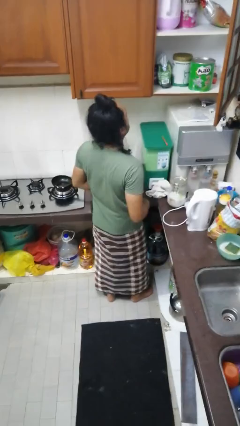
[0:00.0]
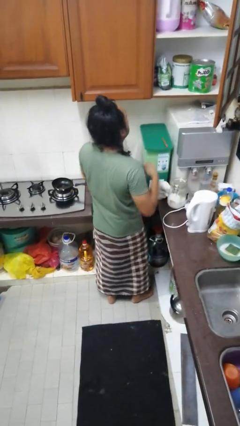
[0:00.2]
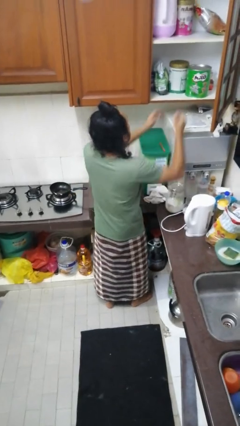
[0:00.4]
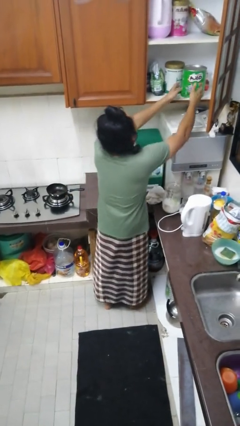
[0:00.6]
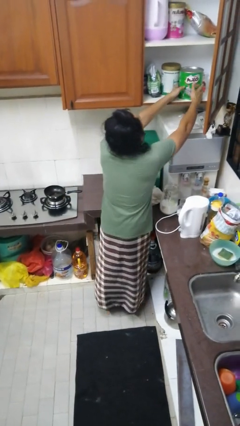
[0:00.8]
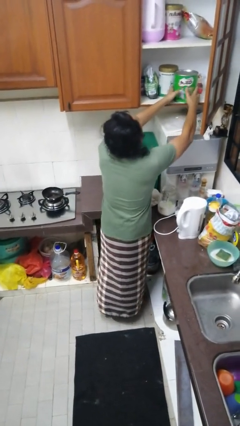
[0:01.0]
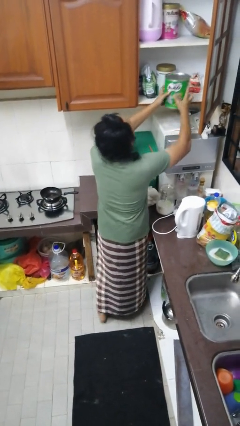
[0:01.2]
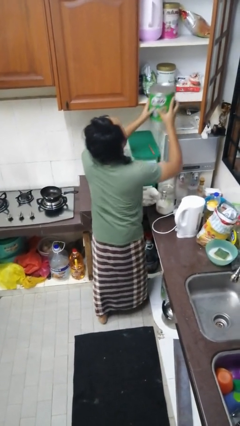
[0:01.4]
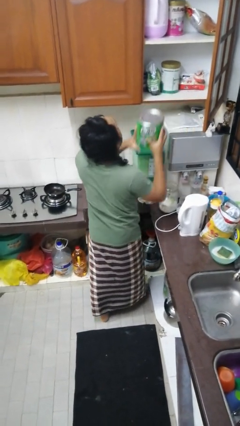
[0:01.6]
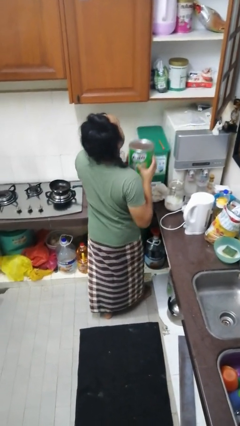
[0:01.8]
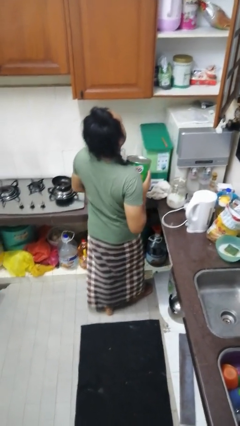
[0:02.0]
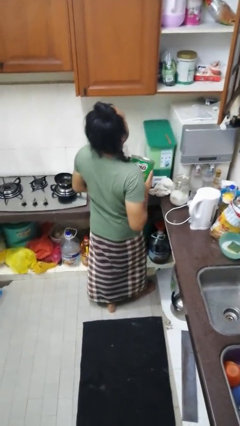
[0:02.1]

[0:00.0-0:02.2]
person takes object from cabinet

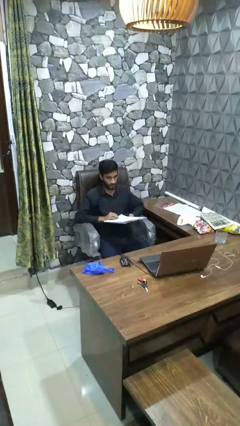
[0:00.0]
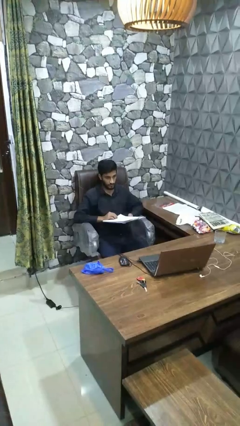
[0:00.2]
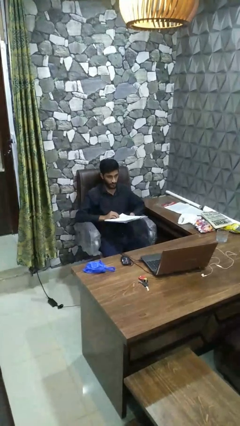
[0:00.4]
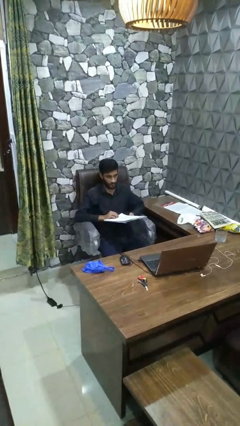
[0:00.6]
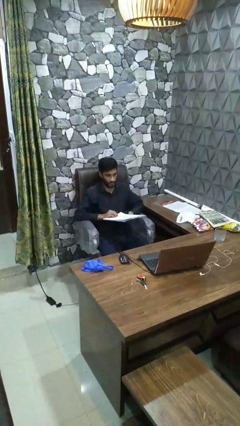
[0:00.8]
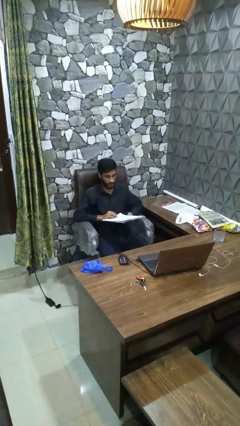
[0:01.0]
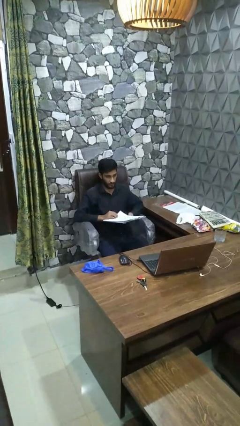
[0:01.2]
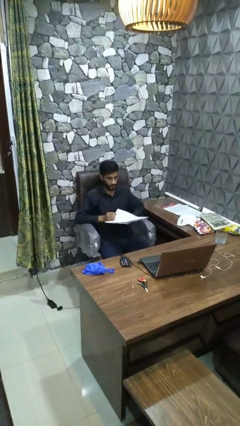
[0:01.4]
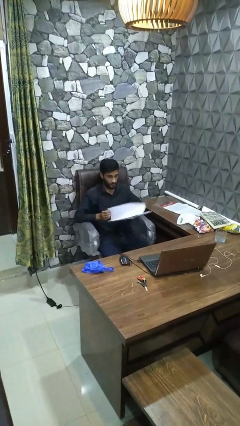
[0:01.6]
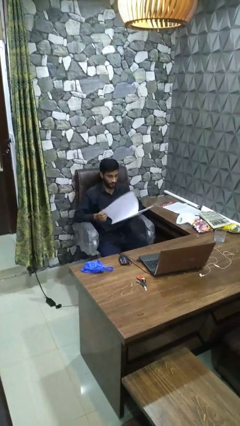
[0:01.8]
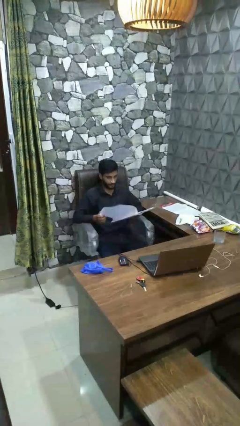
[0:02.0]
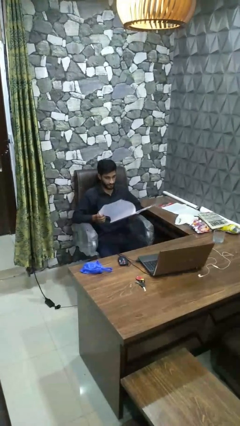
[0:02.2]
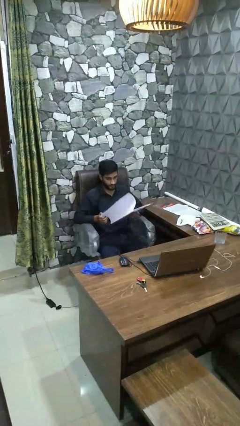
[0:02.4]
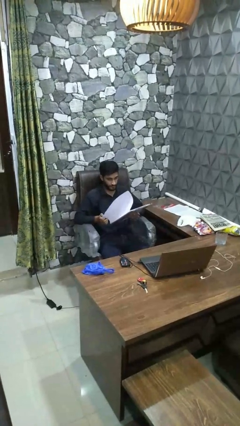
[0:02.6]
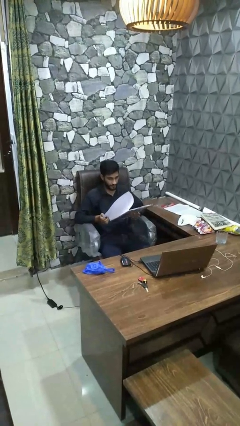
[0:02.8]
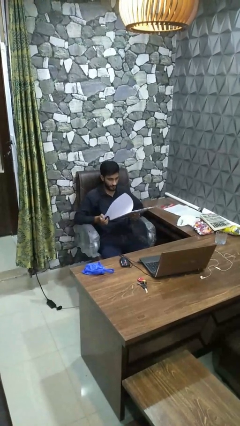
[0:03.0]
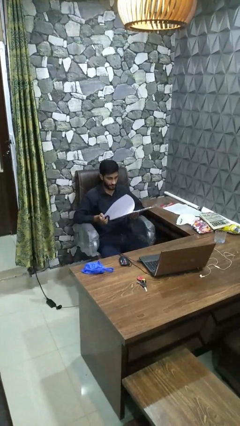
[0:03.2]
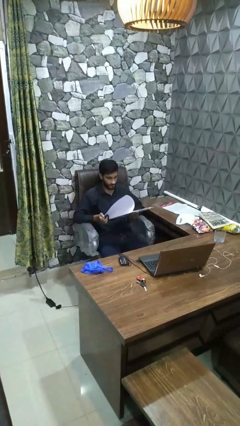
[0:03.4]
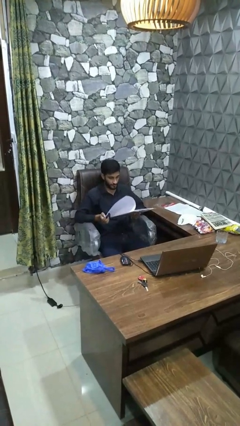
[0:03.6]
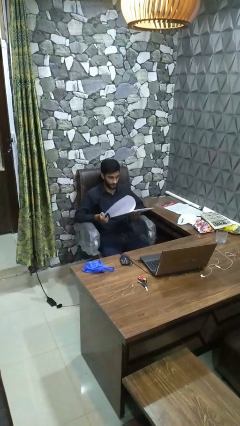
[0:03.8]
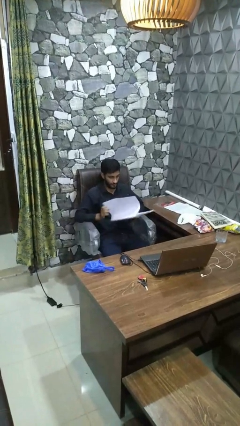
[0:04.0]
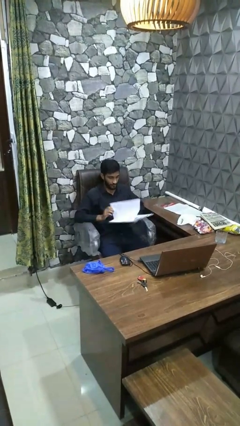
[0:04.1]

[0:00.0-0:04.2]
person reads book

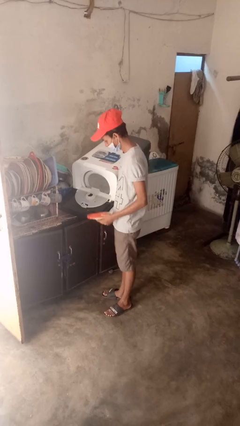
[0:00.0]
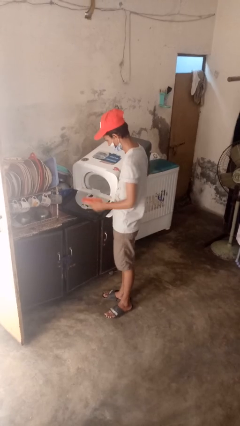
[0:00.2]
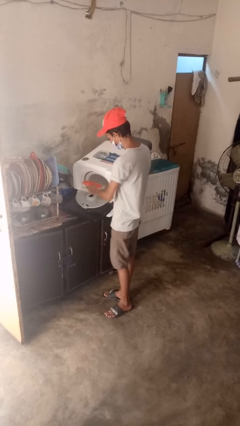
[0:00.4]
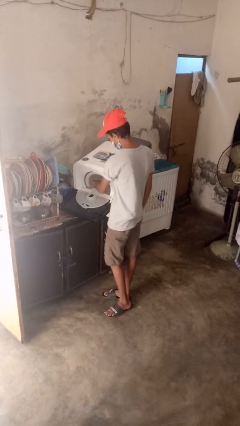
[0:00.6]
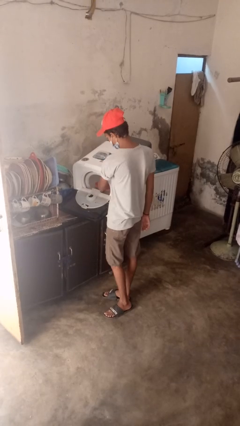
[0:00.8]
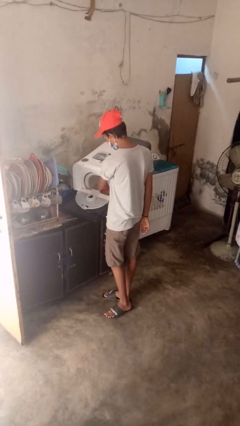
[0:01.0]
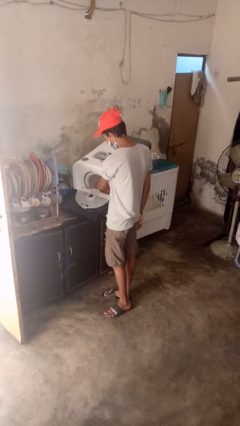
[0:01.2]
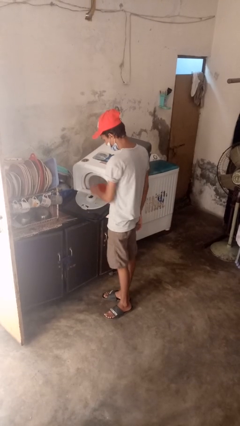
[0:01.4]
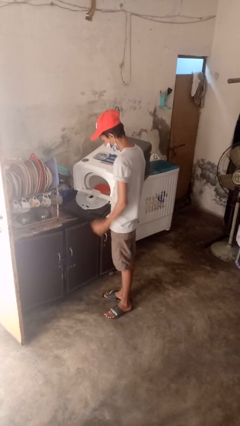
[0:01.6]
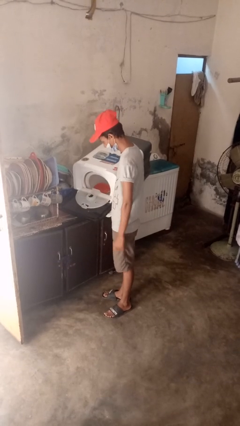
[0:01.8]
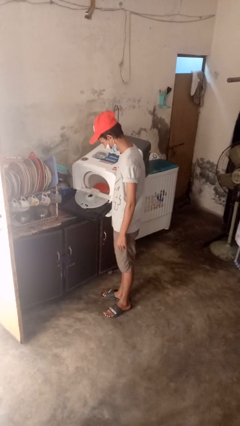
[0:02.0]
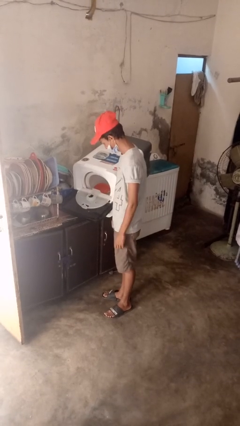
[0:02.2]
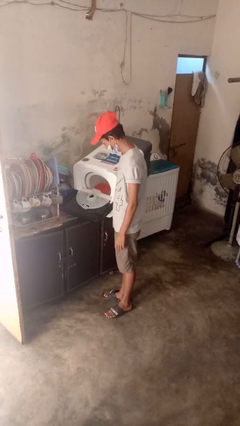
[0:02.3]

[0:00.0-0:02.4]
person loads dishwasher

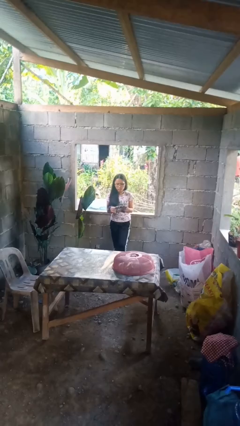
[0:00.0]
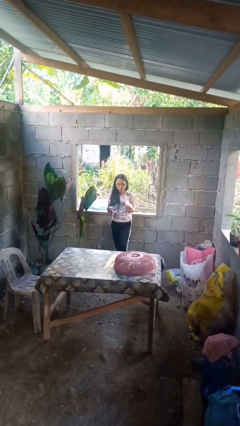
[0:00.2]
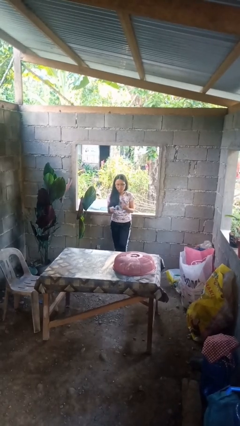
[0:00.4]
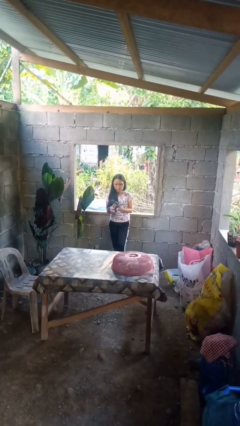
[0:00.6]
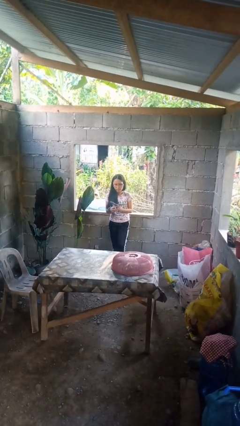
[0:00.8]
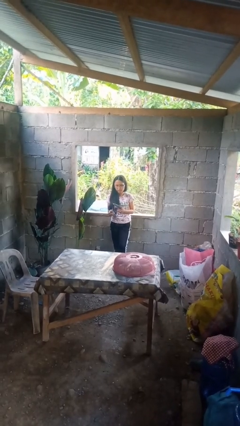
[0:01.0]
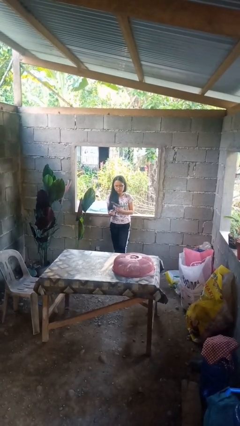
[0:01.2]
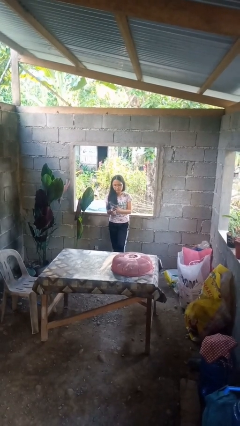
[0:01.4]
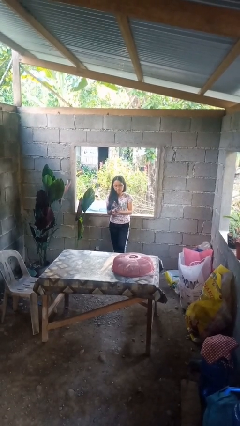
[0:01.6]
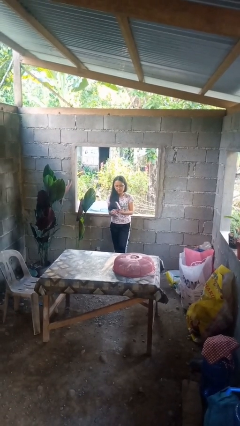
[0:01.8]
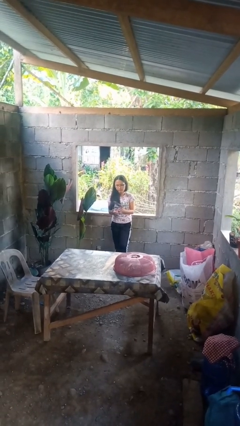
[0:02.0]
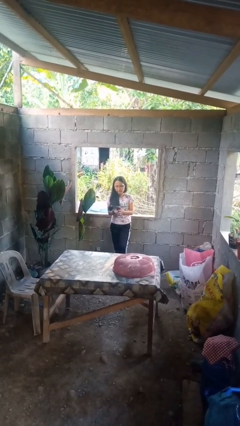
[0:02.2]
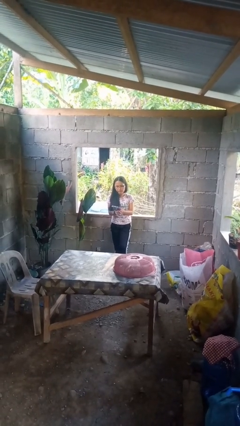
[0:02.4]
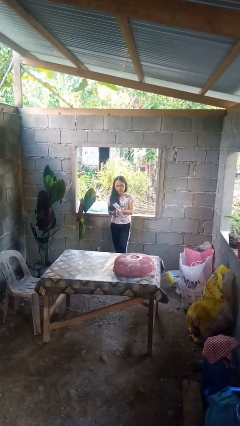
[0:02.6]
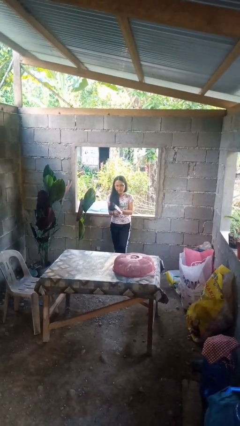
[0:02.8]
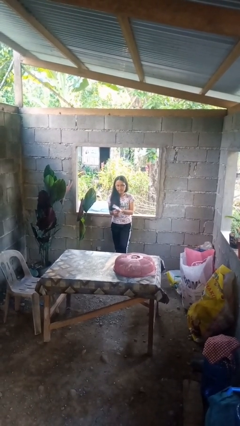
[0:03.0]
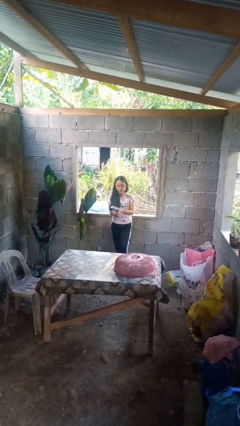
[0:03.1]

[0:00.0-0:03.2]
person crumples paper

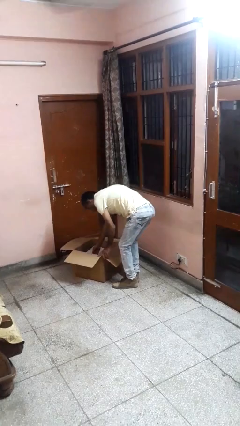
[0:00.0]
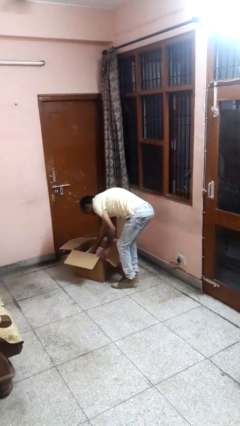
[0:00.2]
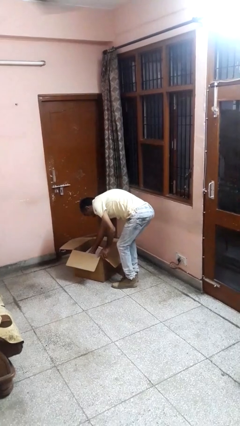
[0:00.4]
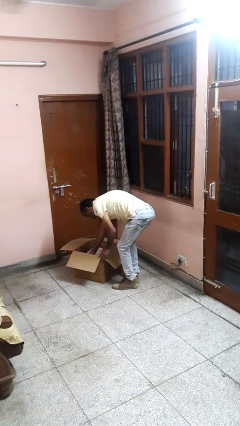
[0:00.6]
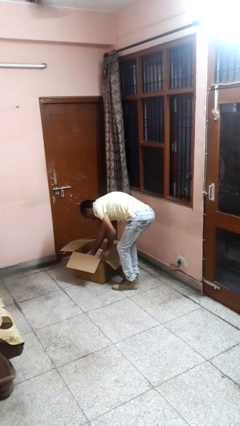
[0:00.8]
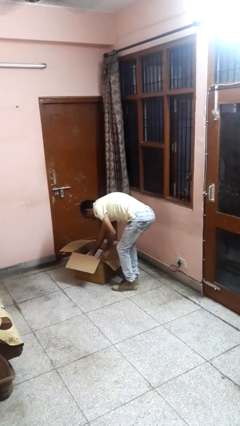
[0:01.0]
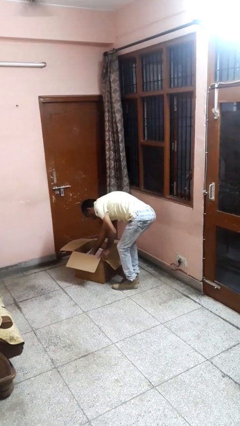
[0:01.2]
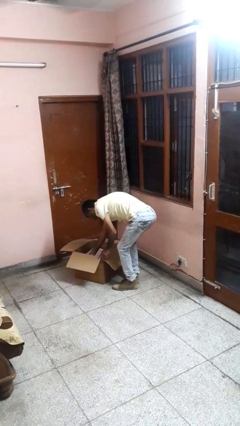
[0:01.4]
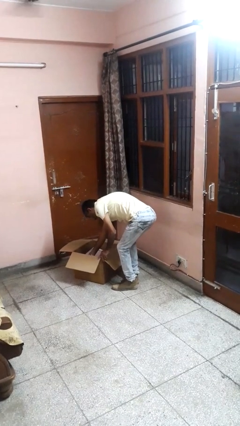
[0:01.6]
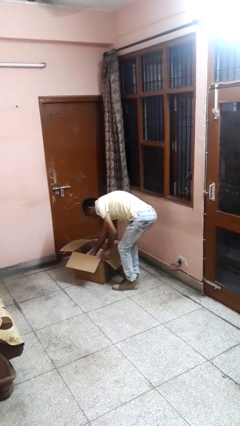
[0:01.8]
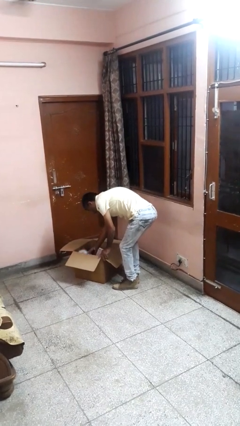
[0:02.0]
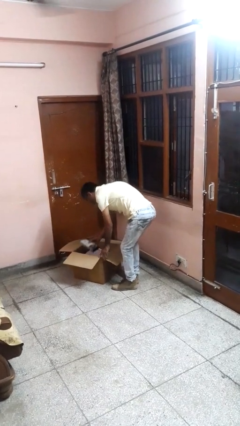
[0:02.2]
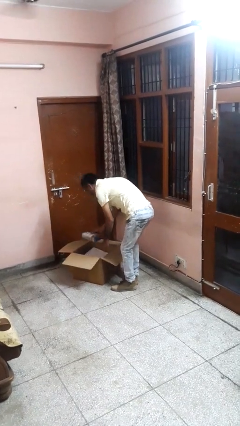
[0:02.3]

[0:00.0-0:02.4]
person takes object from box

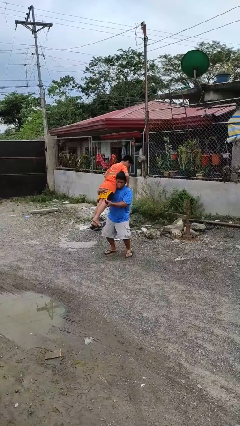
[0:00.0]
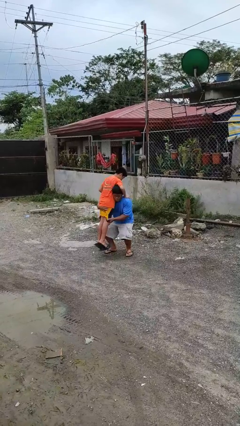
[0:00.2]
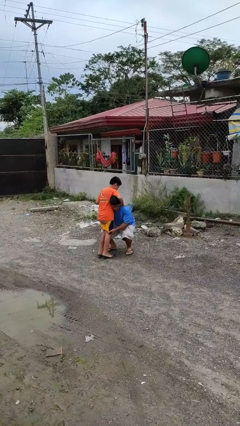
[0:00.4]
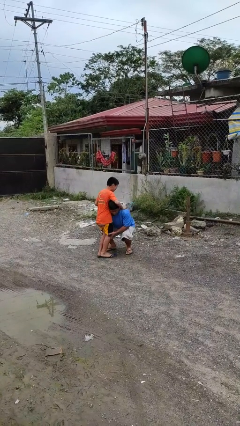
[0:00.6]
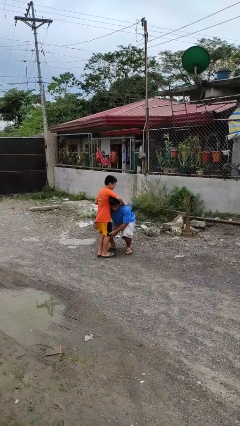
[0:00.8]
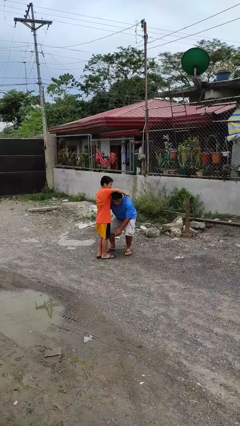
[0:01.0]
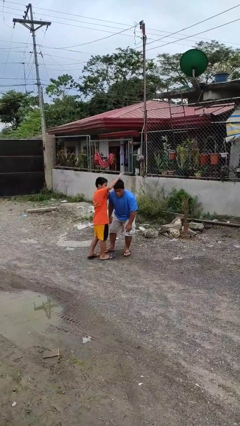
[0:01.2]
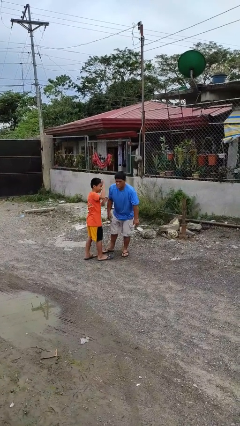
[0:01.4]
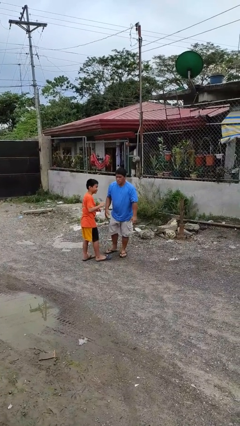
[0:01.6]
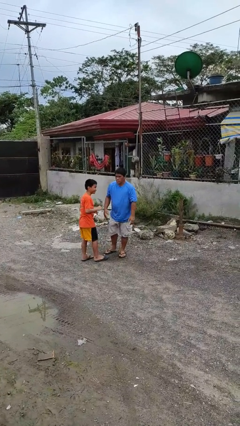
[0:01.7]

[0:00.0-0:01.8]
person puts down person

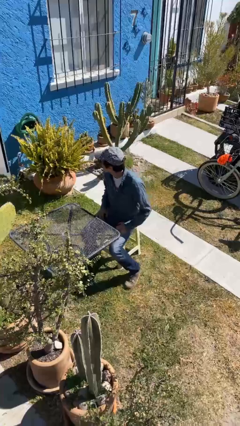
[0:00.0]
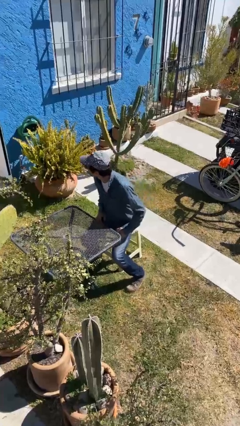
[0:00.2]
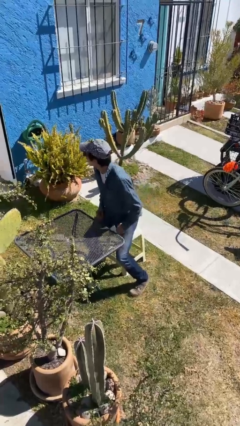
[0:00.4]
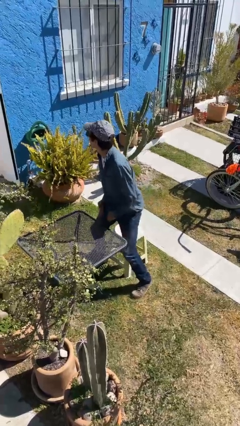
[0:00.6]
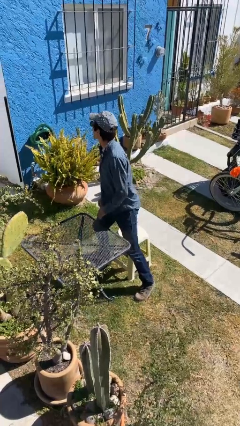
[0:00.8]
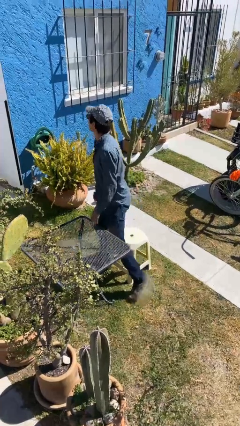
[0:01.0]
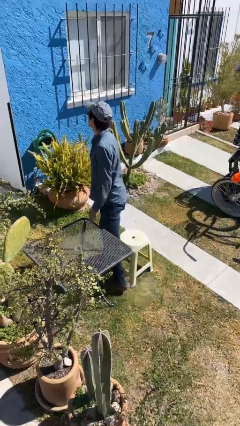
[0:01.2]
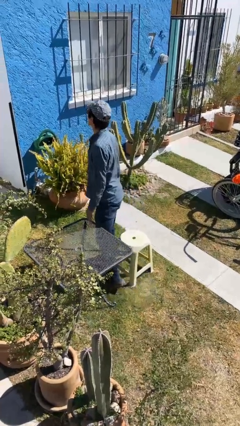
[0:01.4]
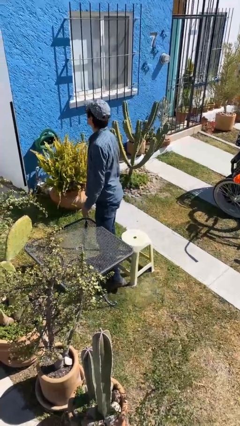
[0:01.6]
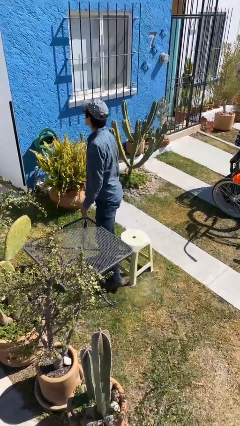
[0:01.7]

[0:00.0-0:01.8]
person stands up
